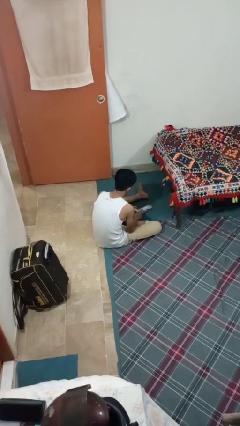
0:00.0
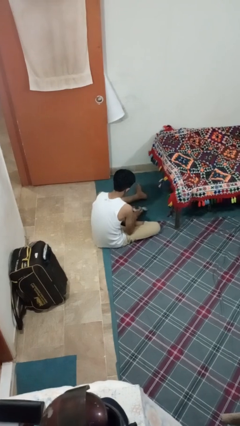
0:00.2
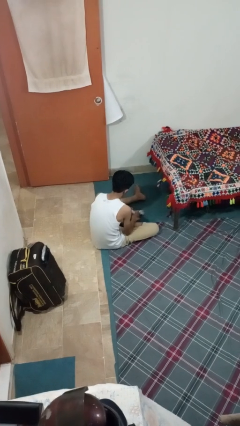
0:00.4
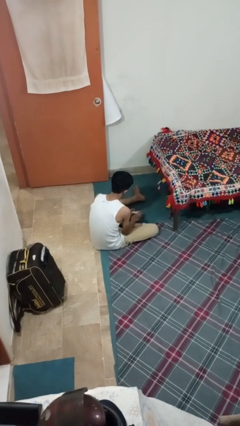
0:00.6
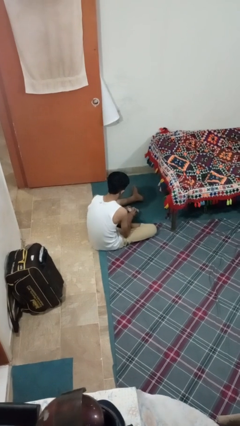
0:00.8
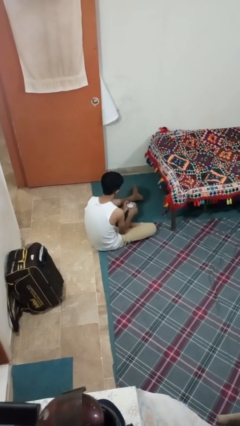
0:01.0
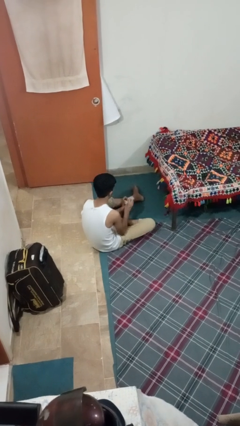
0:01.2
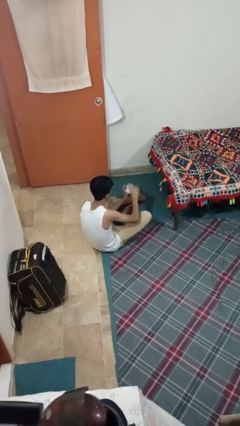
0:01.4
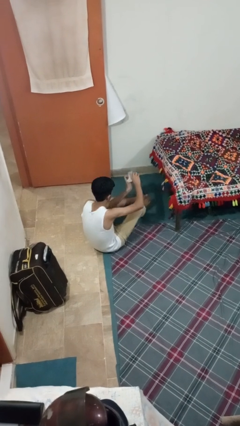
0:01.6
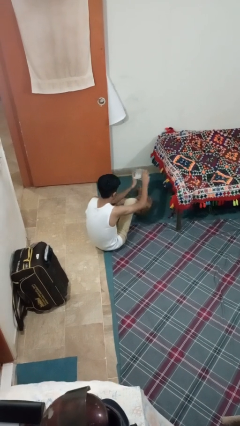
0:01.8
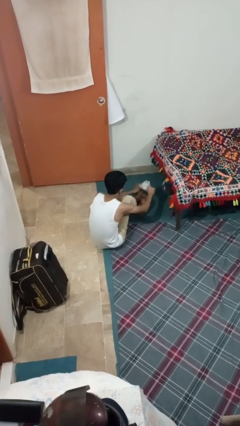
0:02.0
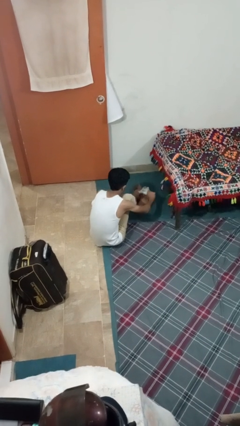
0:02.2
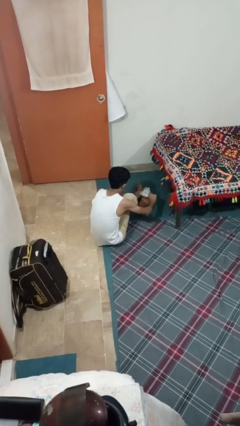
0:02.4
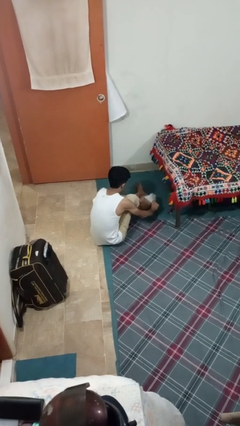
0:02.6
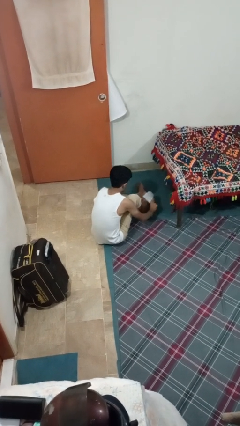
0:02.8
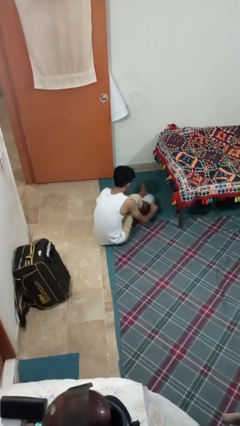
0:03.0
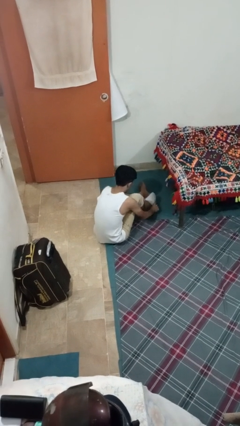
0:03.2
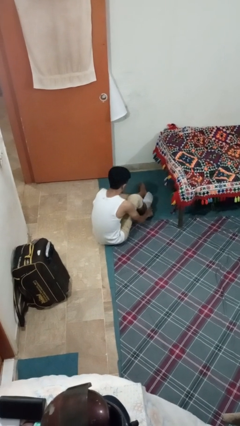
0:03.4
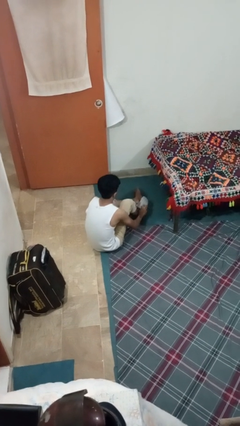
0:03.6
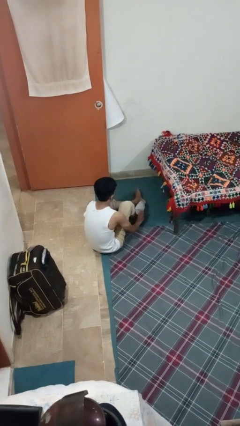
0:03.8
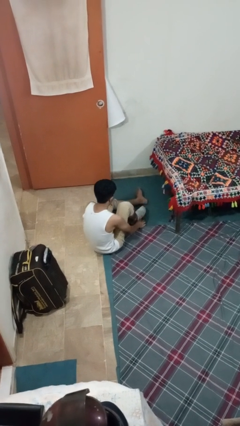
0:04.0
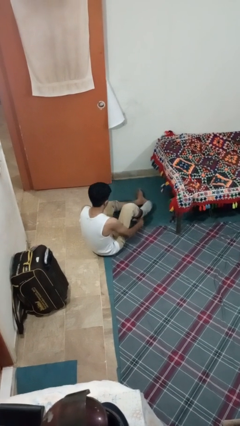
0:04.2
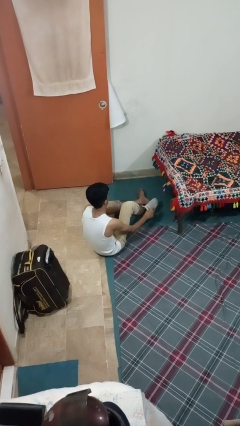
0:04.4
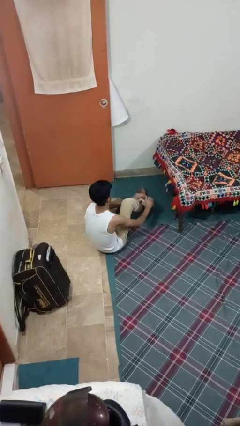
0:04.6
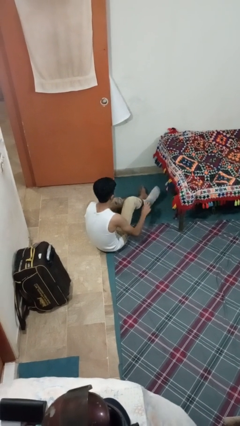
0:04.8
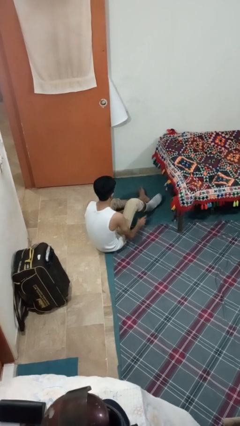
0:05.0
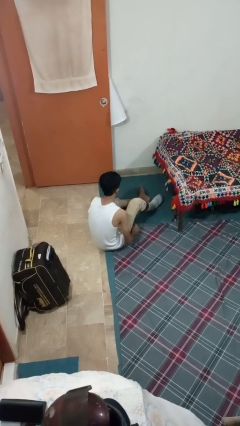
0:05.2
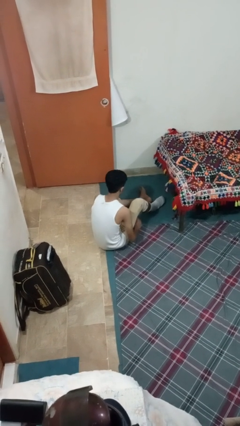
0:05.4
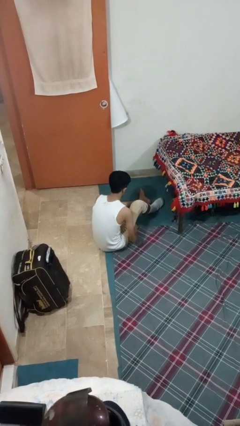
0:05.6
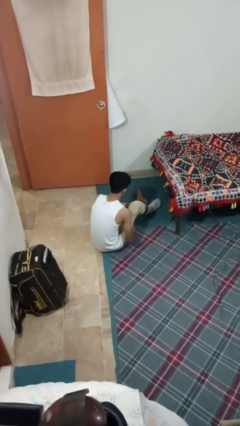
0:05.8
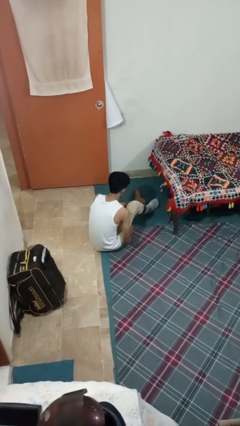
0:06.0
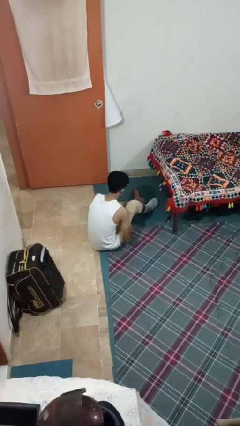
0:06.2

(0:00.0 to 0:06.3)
person puts on socks

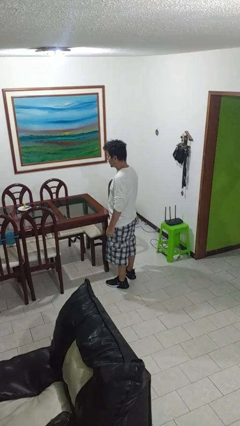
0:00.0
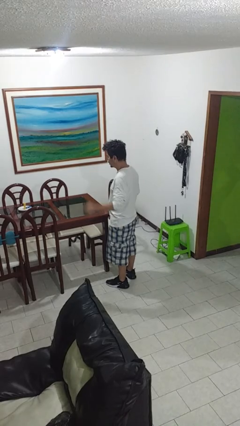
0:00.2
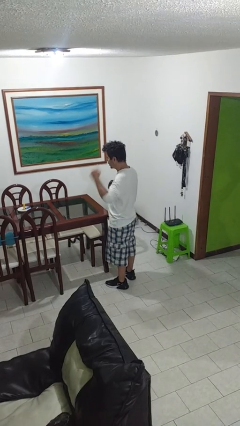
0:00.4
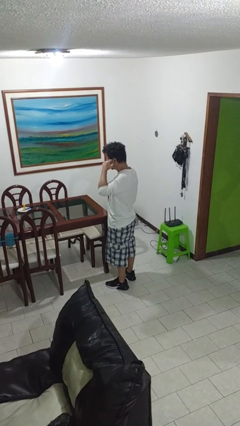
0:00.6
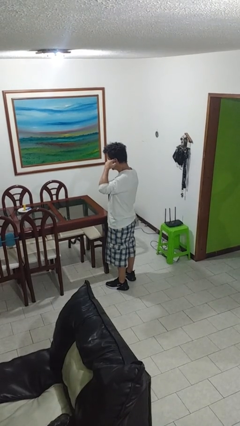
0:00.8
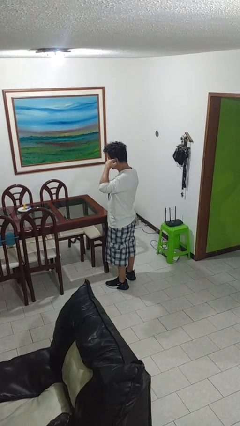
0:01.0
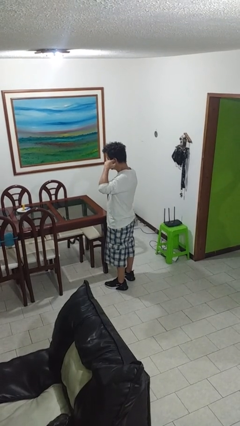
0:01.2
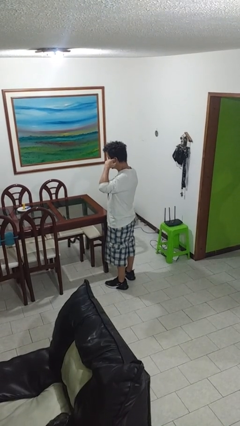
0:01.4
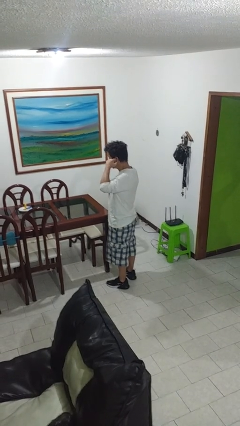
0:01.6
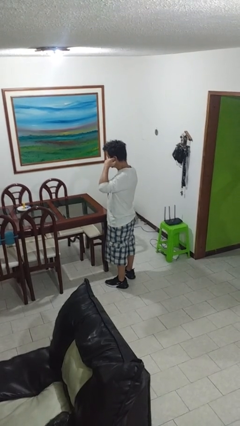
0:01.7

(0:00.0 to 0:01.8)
person puts fingers in ear

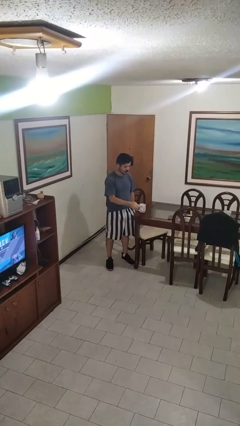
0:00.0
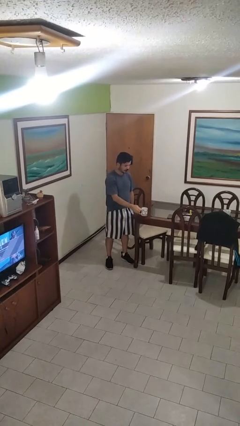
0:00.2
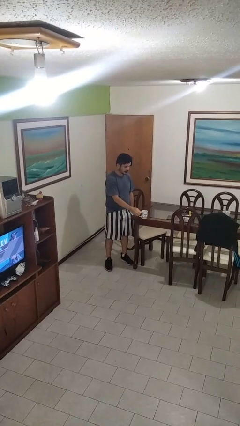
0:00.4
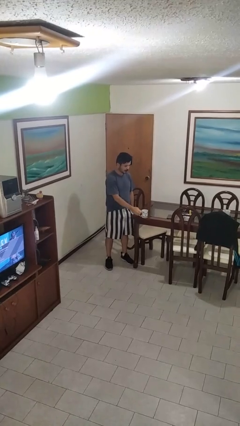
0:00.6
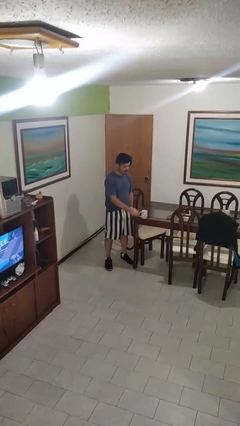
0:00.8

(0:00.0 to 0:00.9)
person puts down object on table

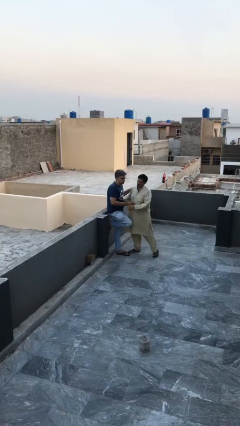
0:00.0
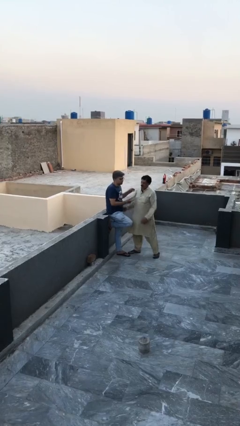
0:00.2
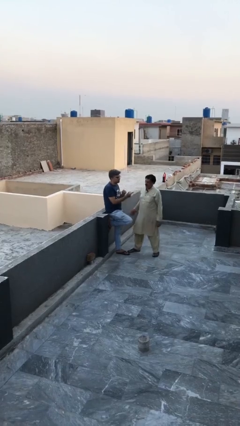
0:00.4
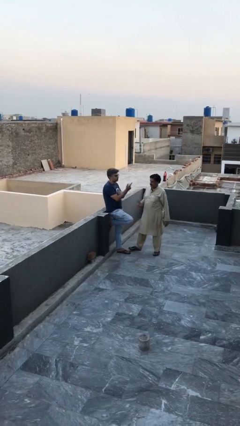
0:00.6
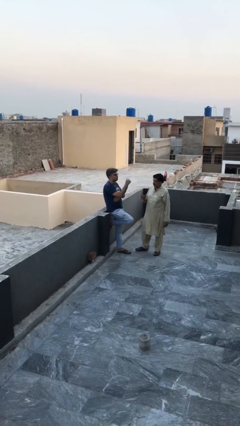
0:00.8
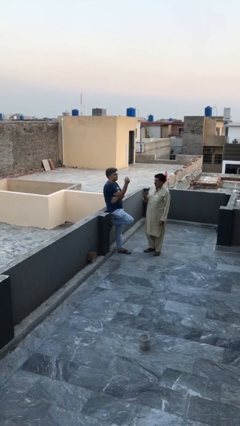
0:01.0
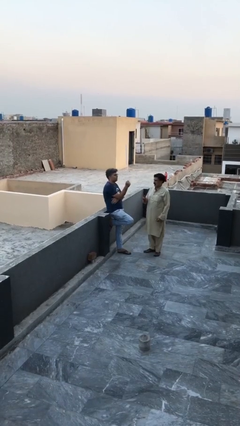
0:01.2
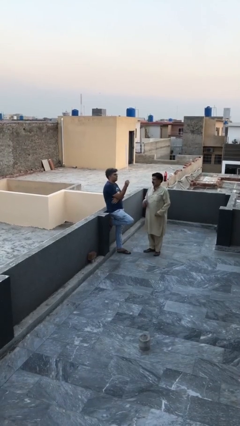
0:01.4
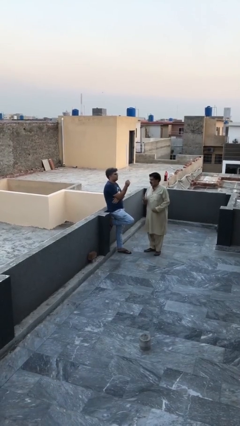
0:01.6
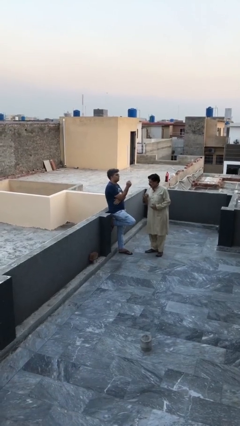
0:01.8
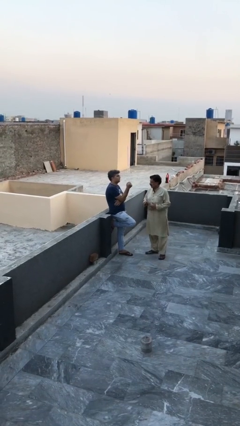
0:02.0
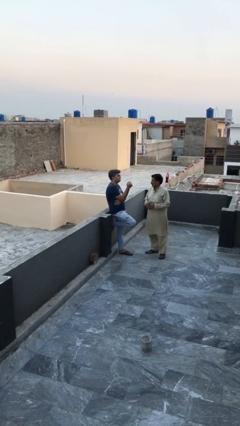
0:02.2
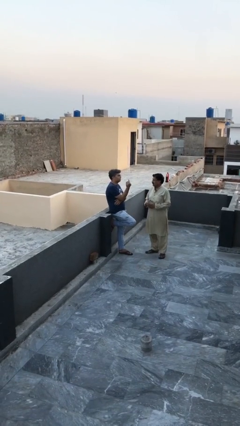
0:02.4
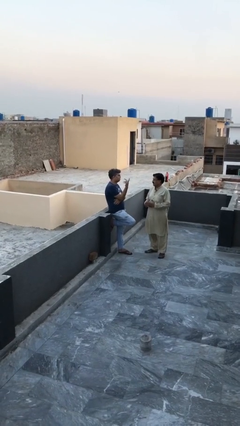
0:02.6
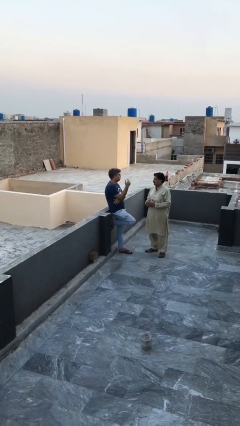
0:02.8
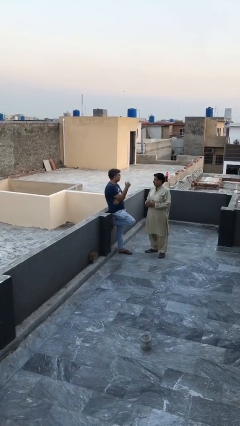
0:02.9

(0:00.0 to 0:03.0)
person talks to person

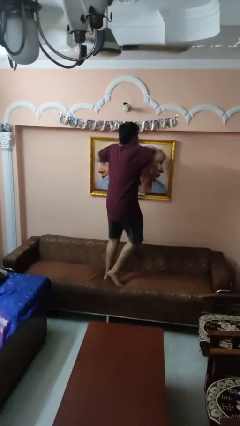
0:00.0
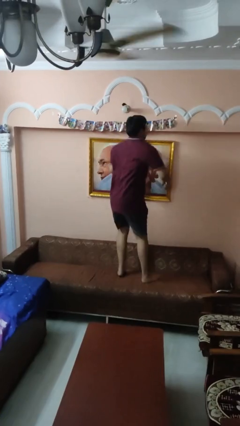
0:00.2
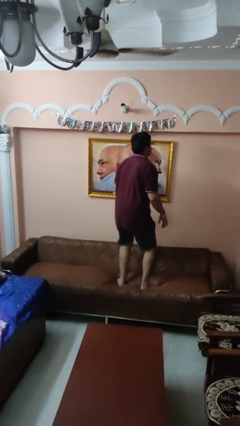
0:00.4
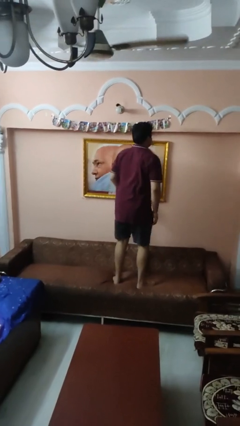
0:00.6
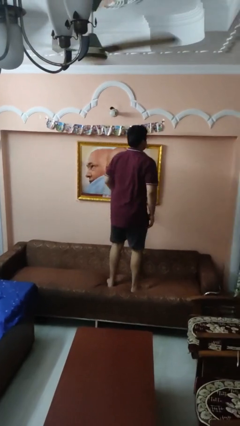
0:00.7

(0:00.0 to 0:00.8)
person jumps on couch

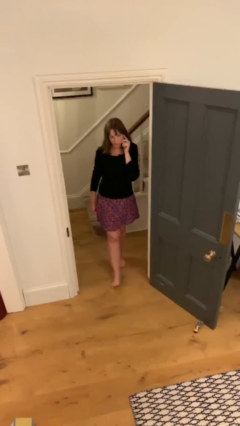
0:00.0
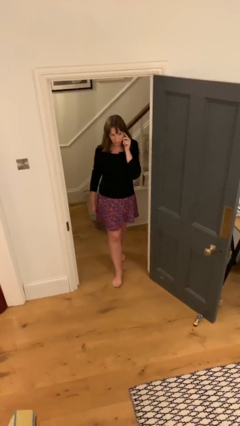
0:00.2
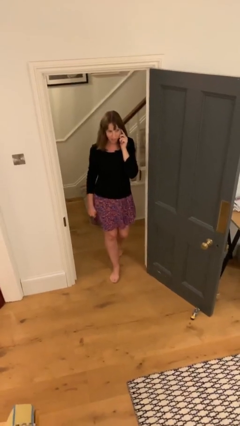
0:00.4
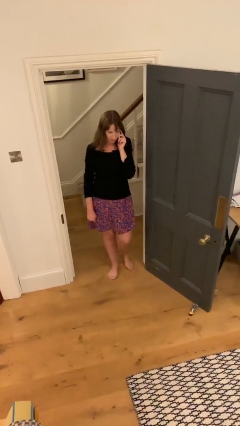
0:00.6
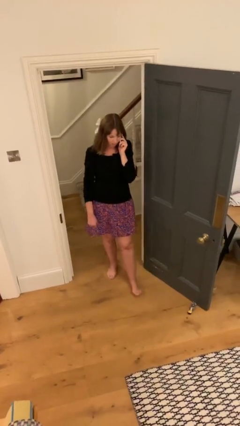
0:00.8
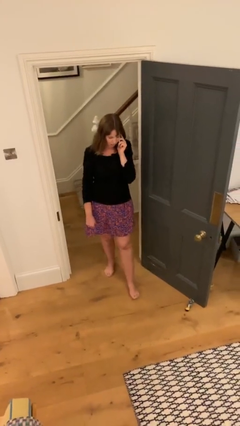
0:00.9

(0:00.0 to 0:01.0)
person enters scene through structure

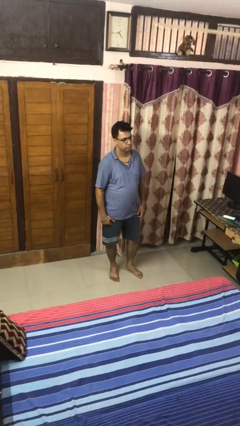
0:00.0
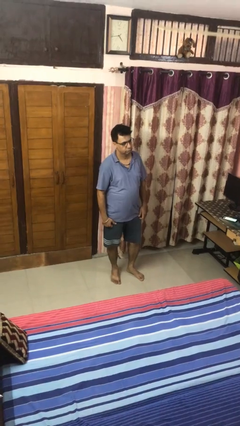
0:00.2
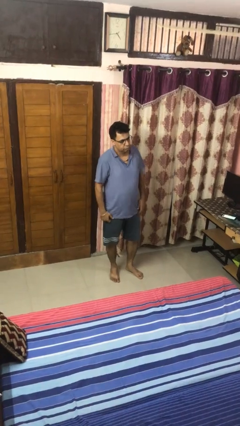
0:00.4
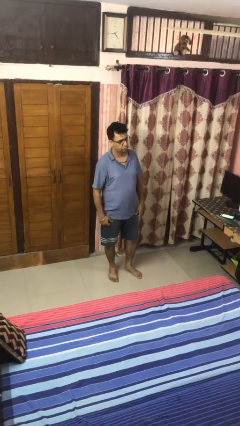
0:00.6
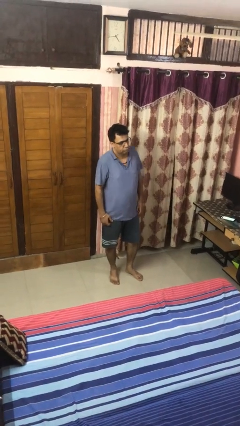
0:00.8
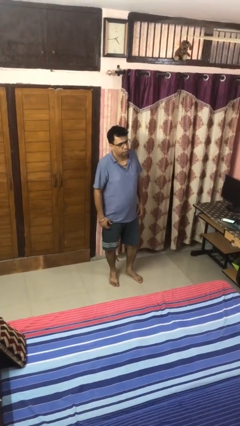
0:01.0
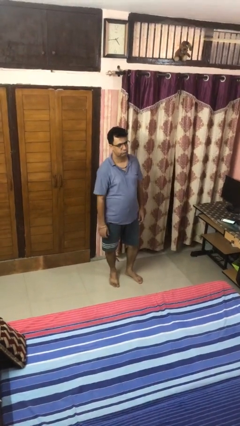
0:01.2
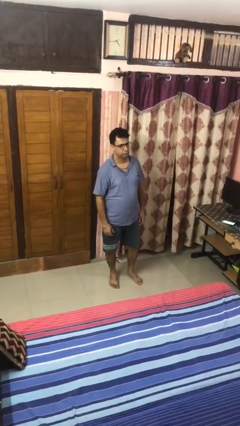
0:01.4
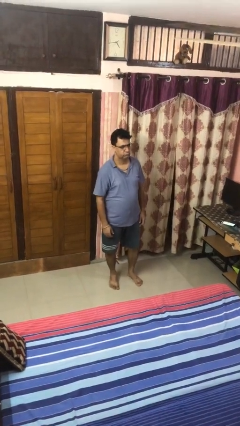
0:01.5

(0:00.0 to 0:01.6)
person shrugs

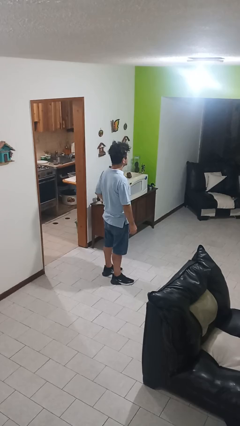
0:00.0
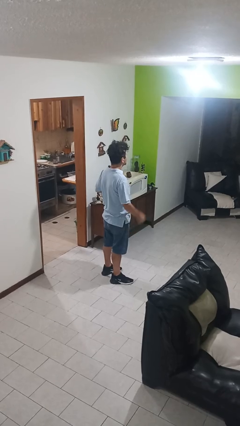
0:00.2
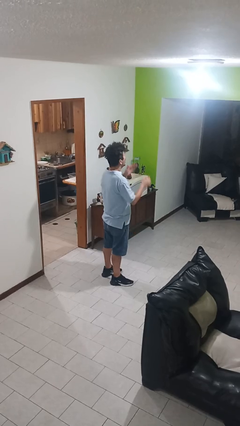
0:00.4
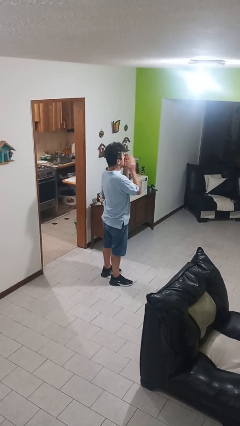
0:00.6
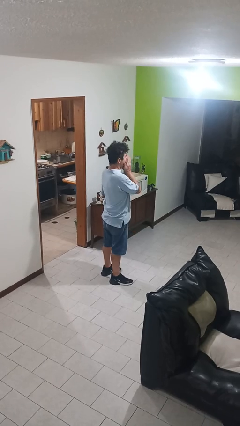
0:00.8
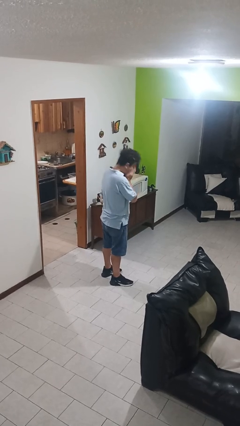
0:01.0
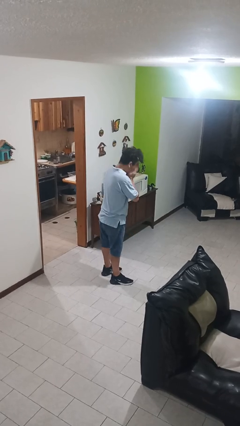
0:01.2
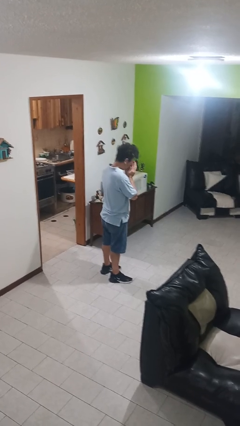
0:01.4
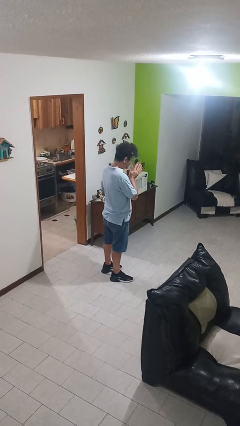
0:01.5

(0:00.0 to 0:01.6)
person sneezes into hand

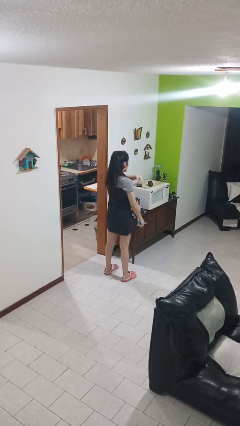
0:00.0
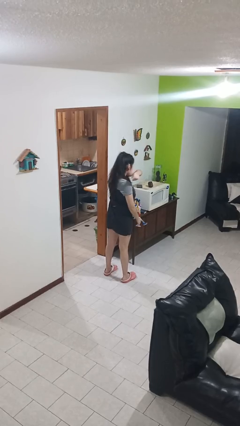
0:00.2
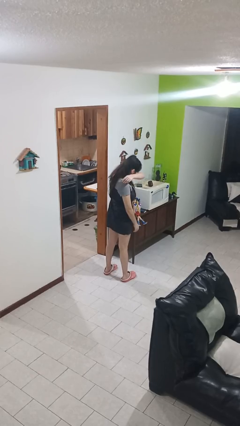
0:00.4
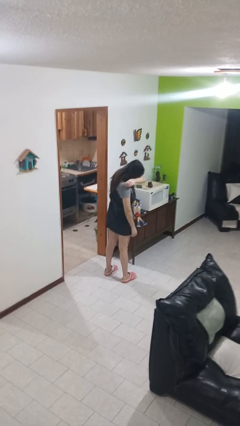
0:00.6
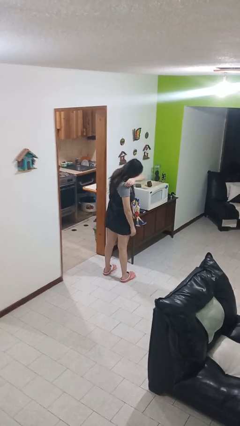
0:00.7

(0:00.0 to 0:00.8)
person sneezes into arm
